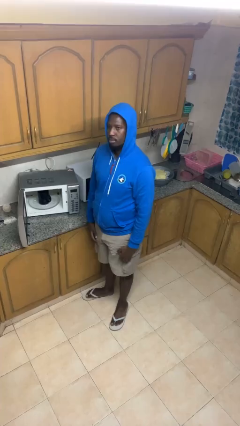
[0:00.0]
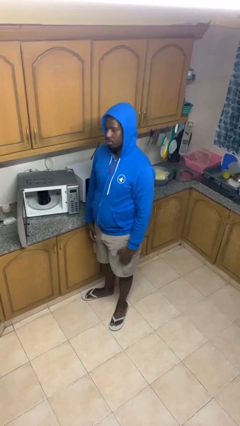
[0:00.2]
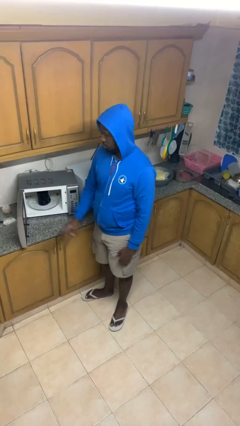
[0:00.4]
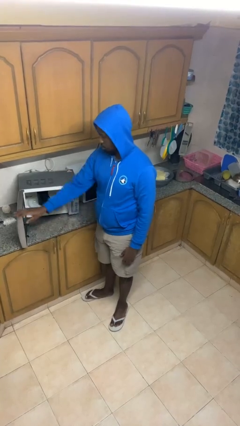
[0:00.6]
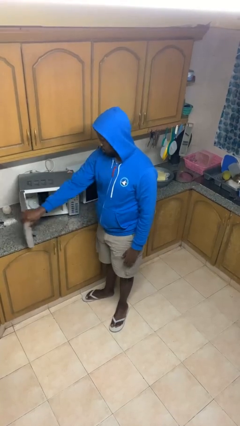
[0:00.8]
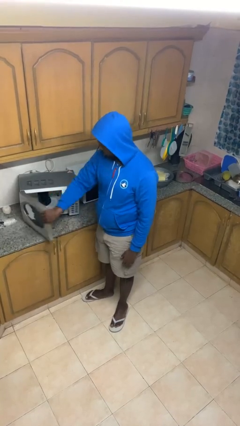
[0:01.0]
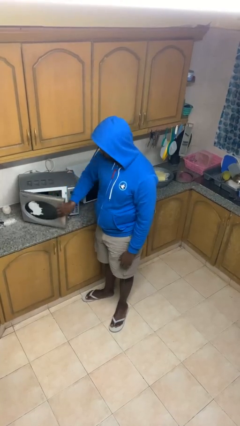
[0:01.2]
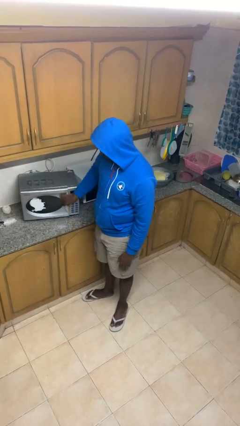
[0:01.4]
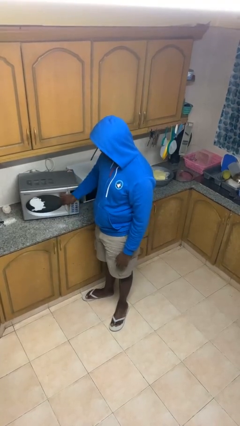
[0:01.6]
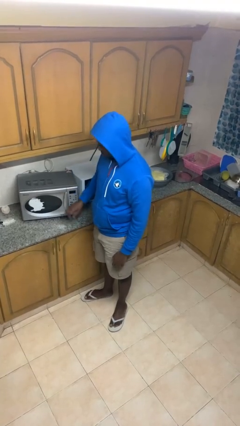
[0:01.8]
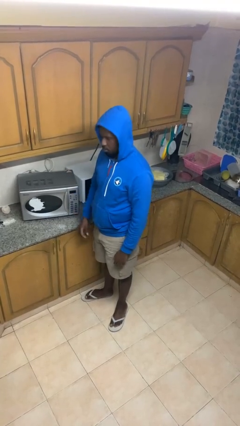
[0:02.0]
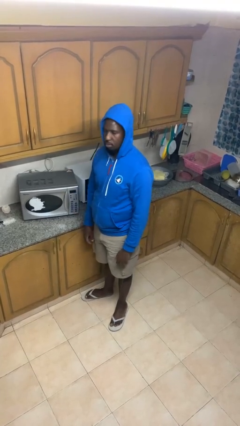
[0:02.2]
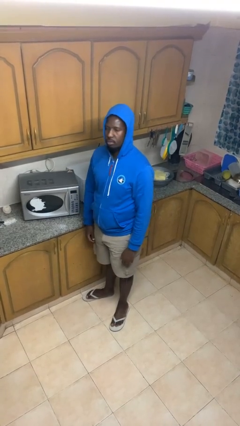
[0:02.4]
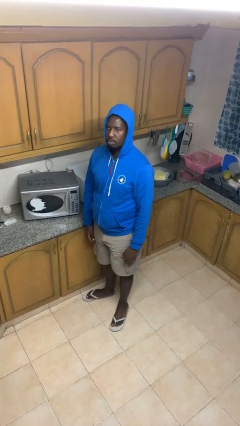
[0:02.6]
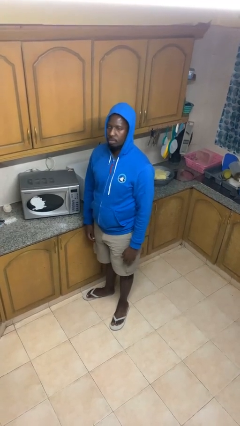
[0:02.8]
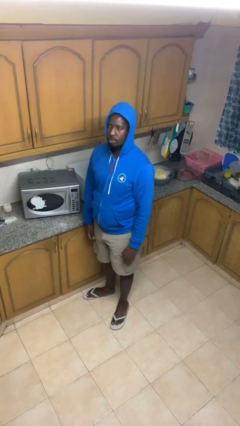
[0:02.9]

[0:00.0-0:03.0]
person closes microwave

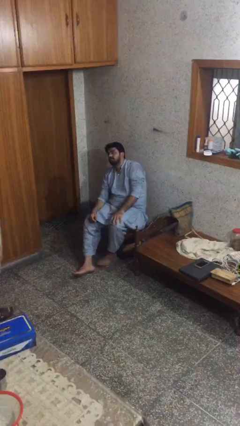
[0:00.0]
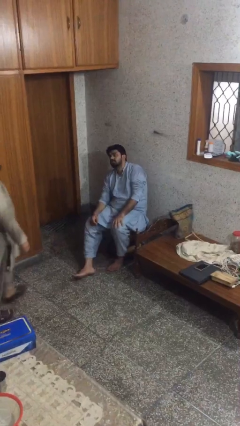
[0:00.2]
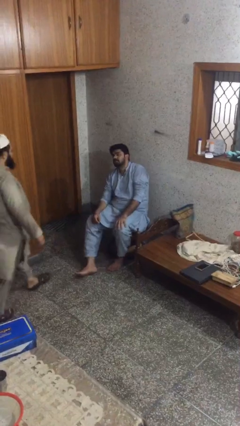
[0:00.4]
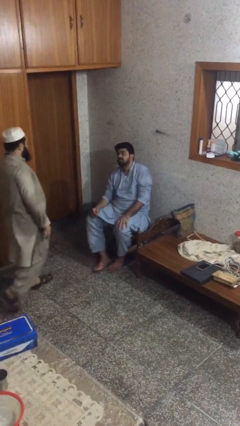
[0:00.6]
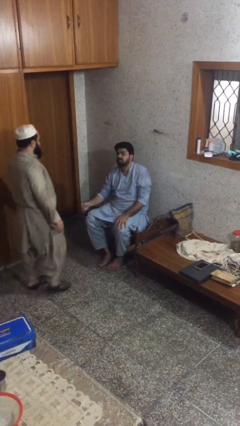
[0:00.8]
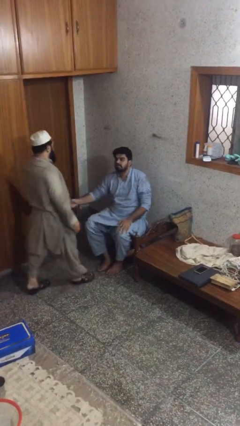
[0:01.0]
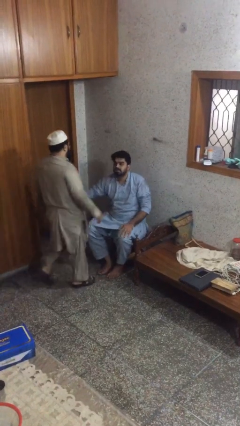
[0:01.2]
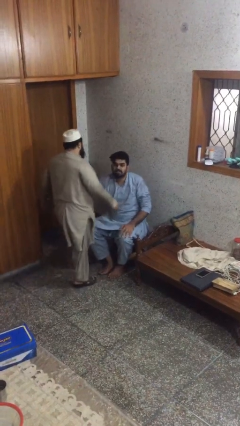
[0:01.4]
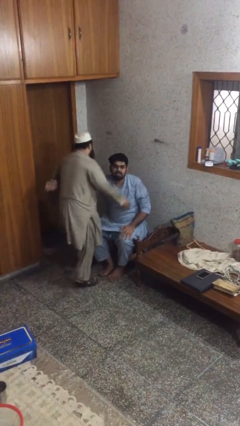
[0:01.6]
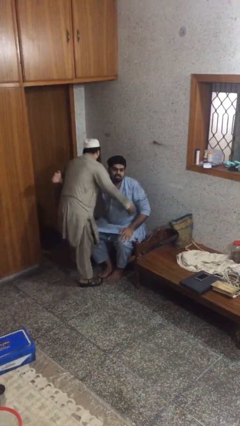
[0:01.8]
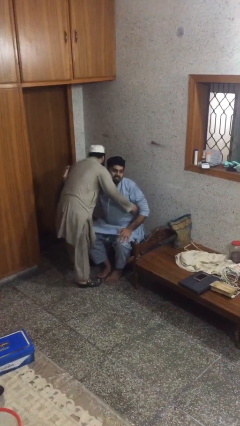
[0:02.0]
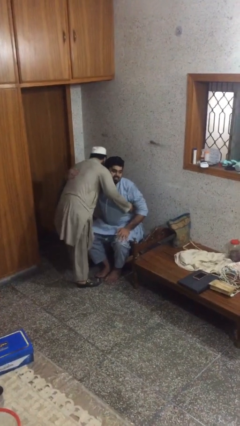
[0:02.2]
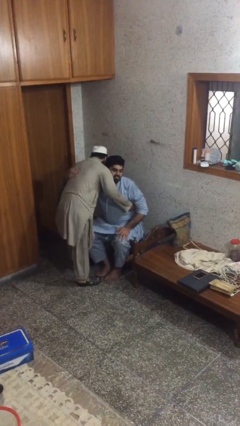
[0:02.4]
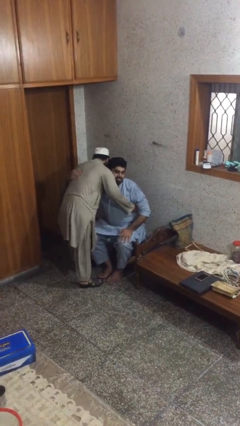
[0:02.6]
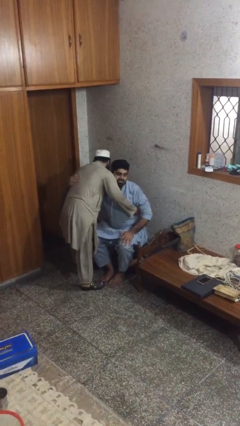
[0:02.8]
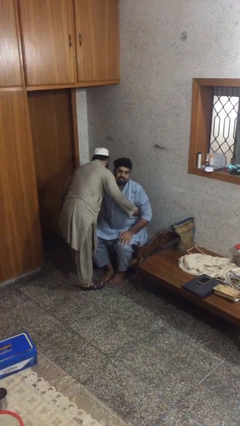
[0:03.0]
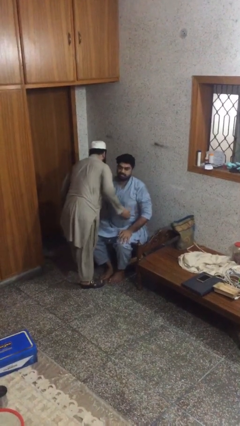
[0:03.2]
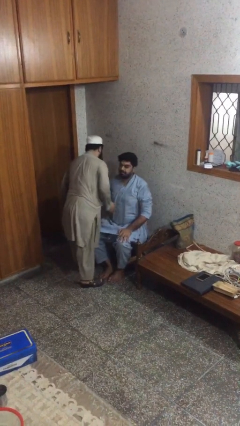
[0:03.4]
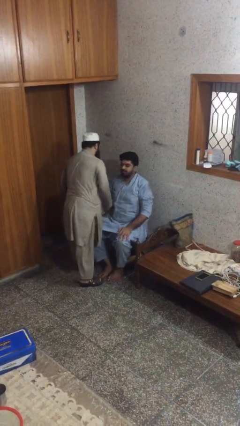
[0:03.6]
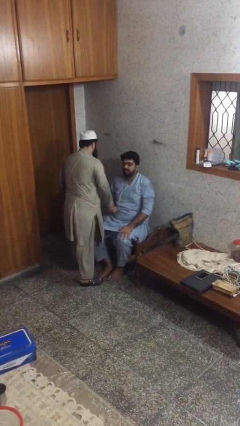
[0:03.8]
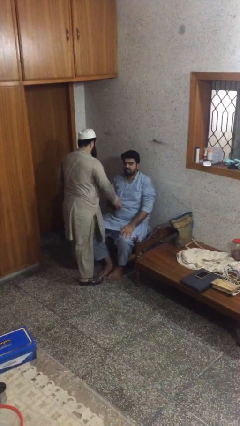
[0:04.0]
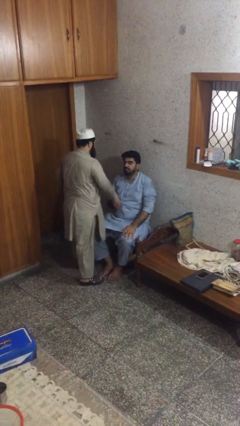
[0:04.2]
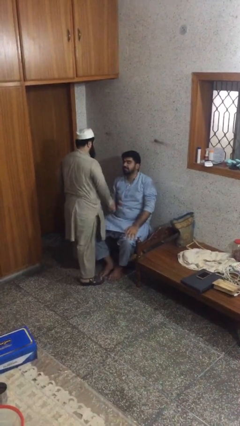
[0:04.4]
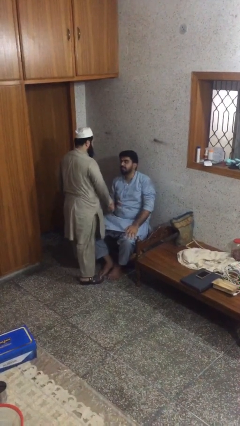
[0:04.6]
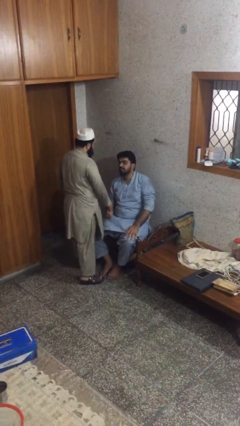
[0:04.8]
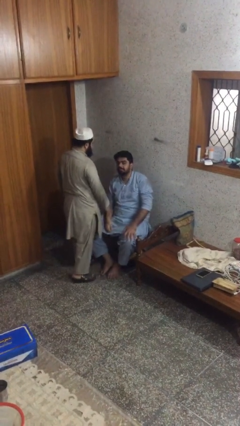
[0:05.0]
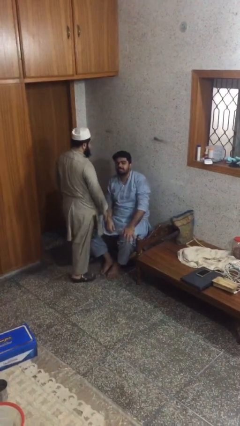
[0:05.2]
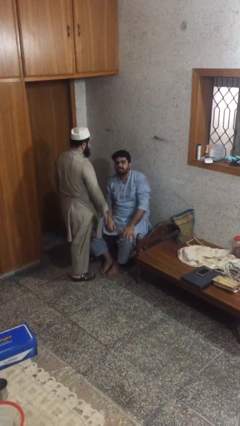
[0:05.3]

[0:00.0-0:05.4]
person embraces person

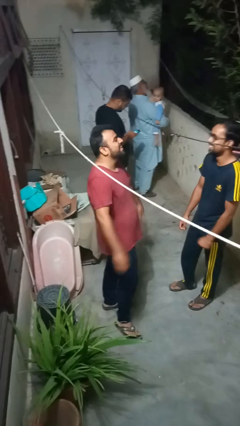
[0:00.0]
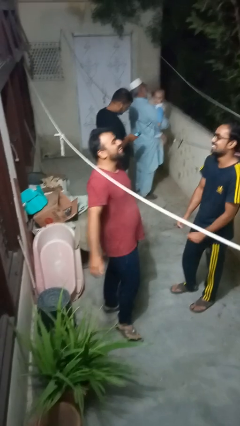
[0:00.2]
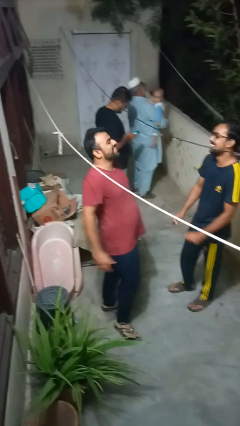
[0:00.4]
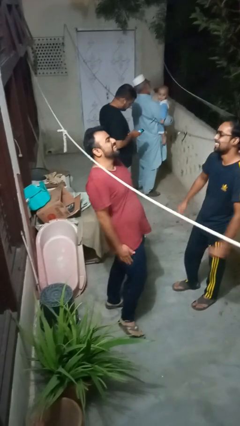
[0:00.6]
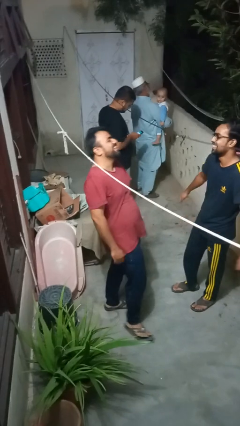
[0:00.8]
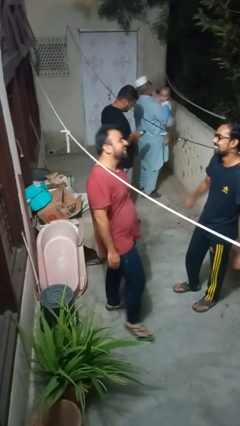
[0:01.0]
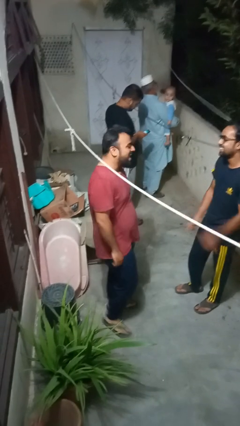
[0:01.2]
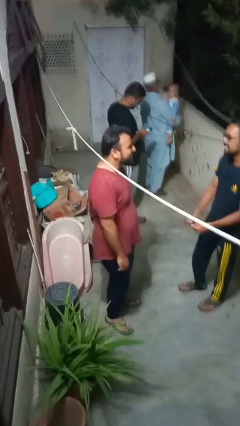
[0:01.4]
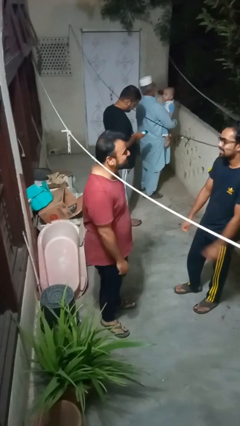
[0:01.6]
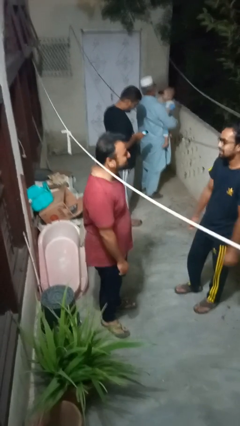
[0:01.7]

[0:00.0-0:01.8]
person laughs with person

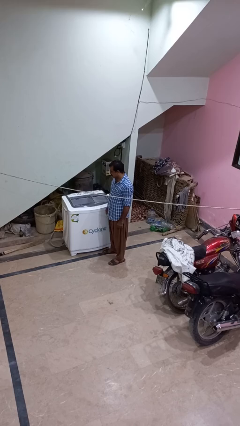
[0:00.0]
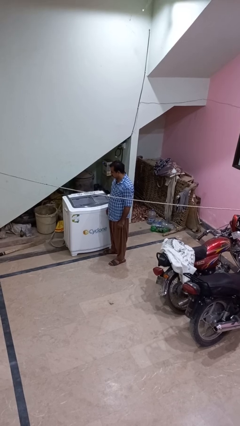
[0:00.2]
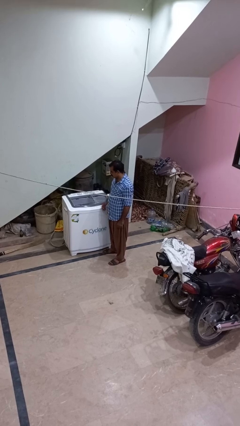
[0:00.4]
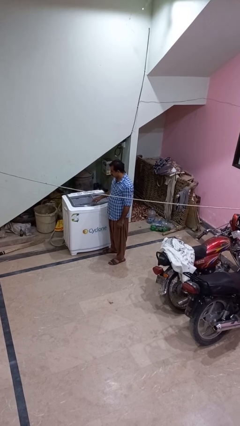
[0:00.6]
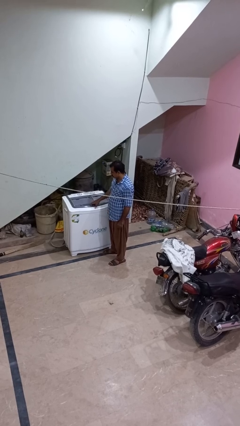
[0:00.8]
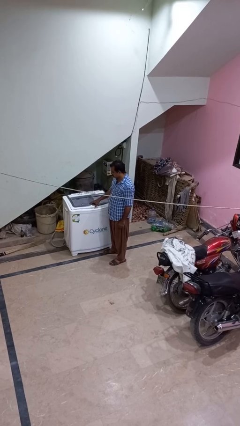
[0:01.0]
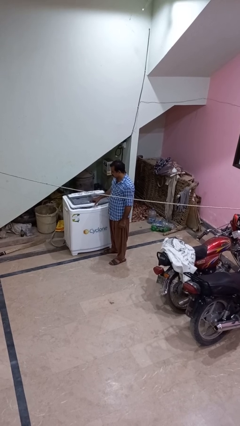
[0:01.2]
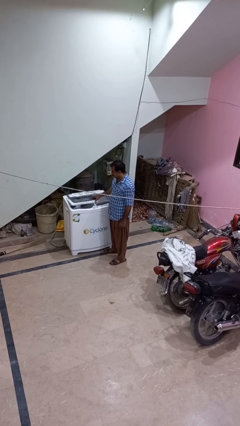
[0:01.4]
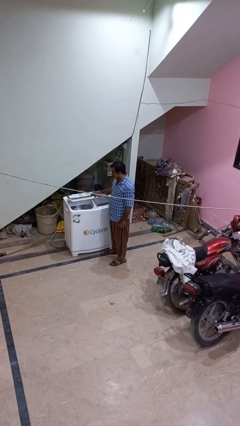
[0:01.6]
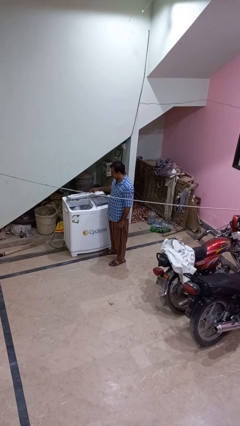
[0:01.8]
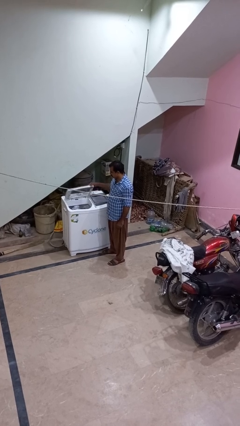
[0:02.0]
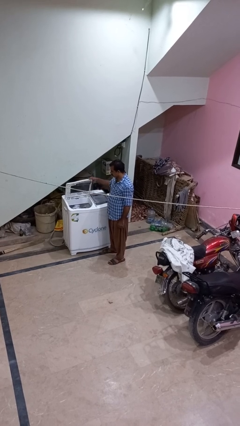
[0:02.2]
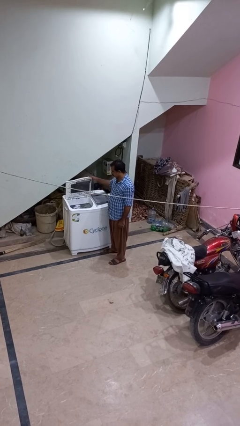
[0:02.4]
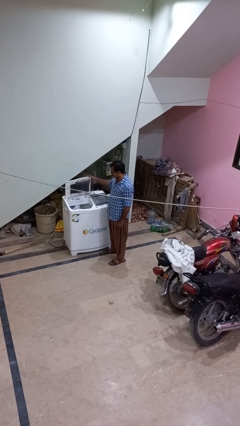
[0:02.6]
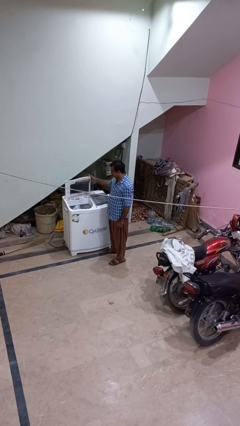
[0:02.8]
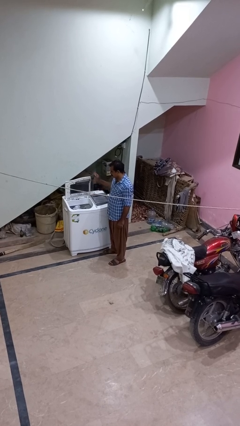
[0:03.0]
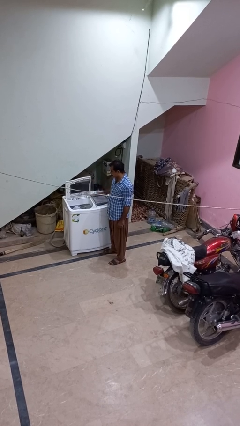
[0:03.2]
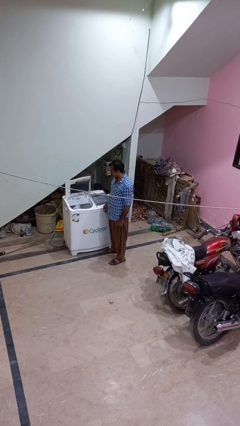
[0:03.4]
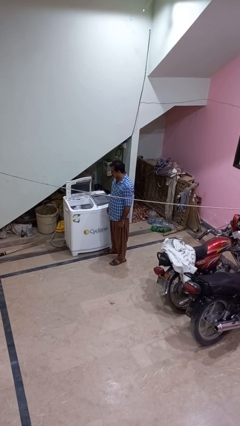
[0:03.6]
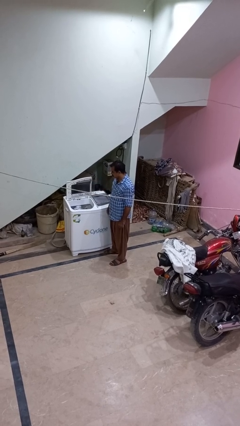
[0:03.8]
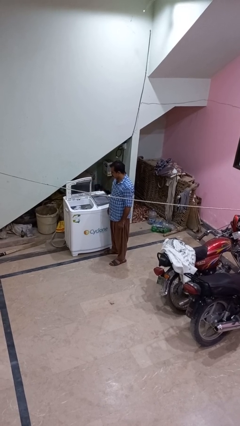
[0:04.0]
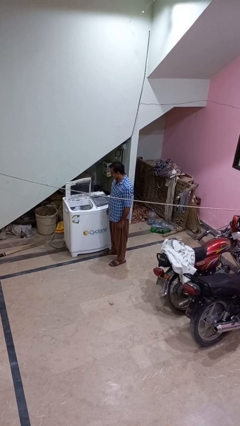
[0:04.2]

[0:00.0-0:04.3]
person opens clothes washer

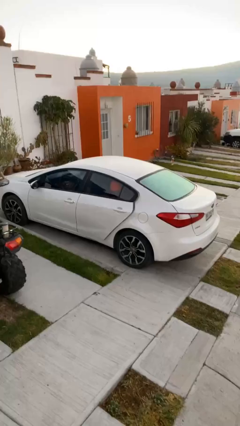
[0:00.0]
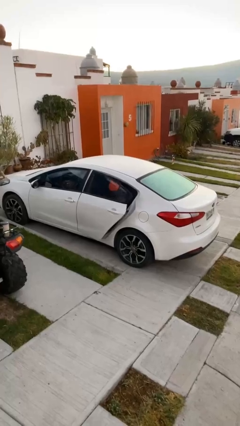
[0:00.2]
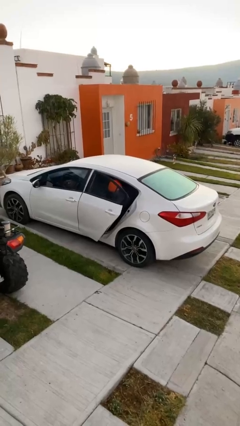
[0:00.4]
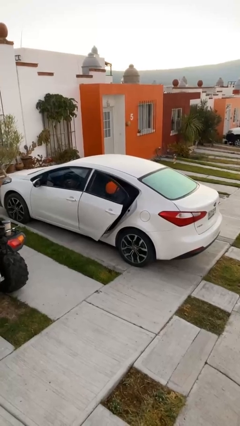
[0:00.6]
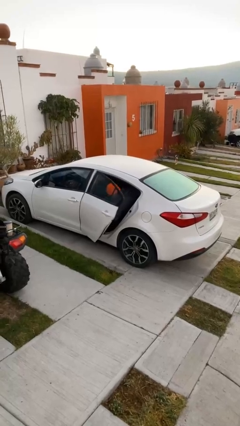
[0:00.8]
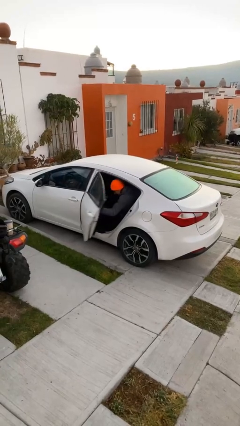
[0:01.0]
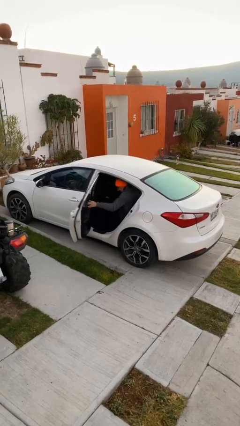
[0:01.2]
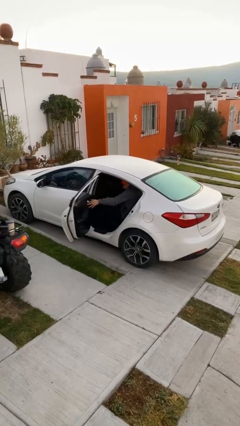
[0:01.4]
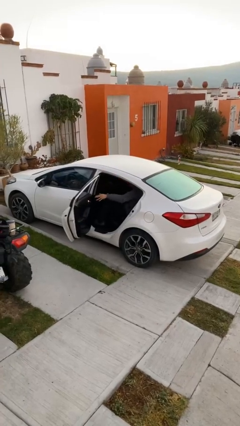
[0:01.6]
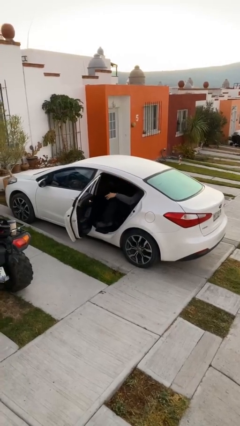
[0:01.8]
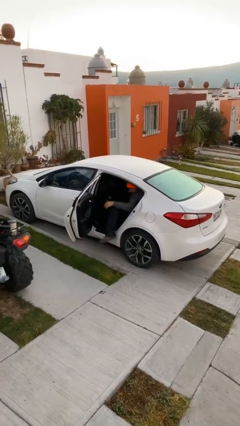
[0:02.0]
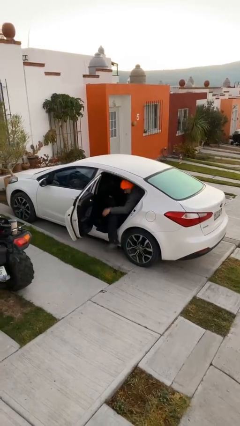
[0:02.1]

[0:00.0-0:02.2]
person opens car door

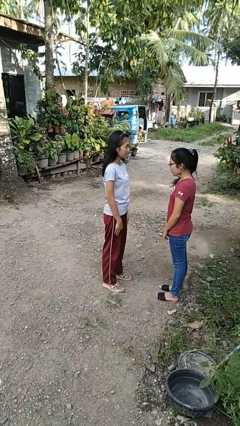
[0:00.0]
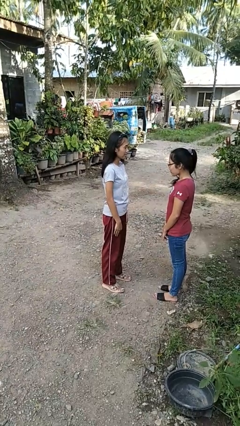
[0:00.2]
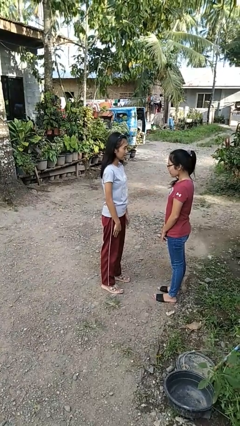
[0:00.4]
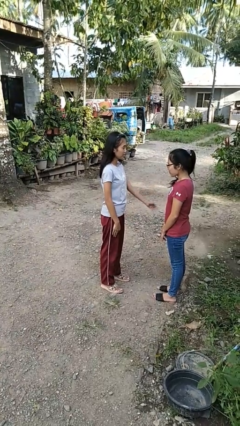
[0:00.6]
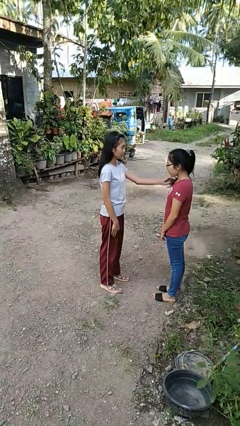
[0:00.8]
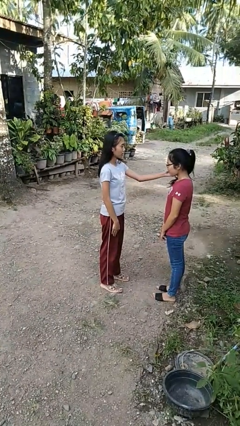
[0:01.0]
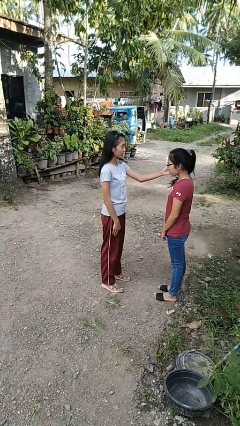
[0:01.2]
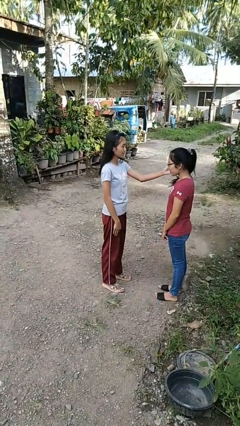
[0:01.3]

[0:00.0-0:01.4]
person touches face of person
